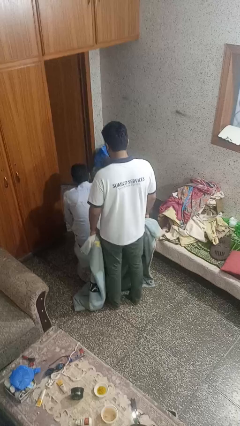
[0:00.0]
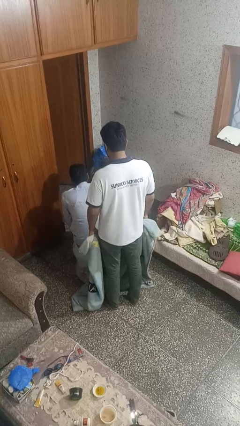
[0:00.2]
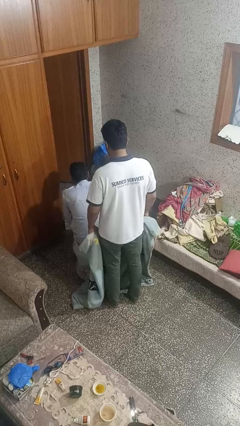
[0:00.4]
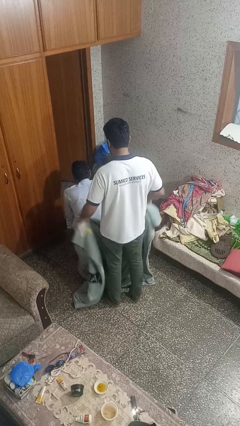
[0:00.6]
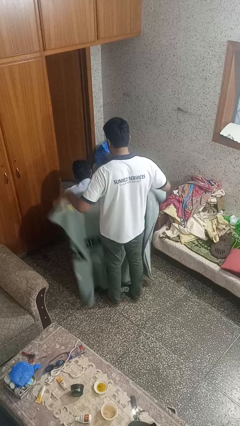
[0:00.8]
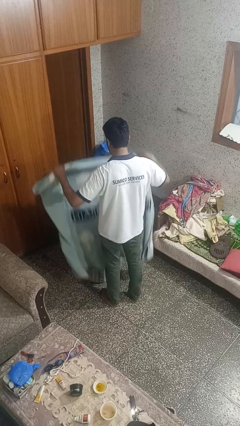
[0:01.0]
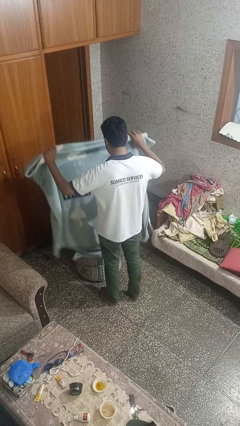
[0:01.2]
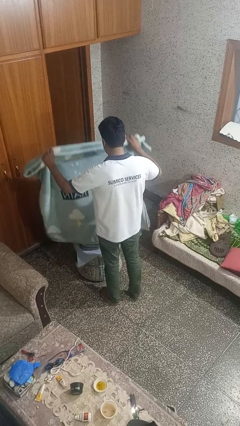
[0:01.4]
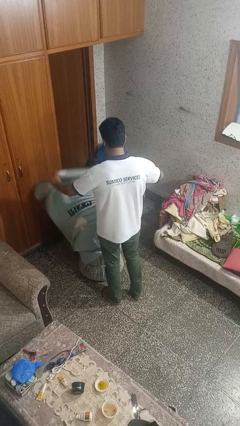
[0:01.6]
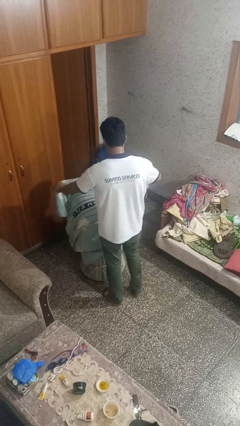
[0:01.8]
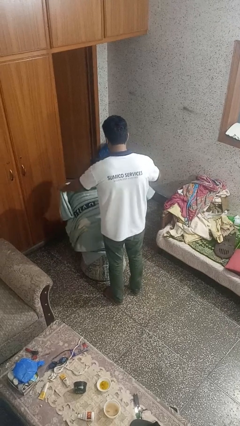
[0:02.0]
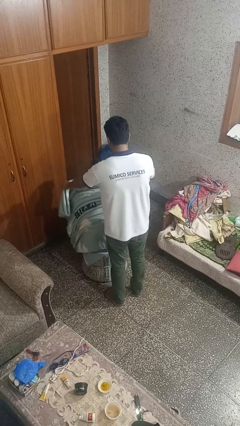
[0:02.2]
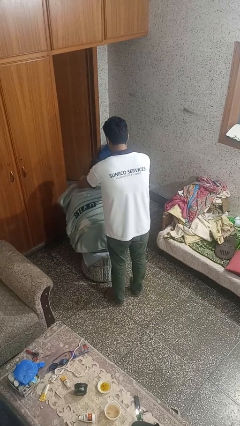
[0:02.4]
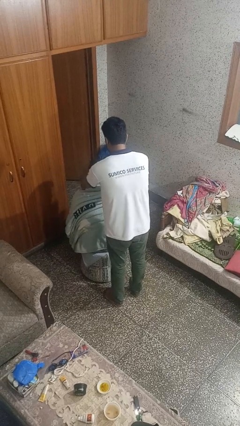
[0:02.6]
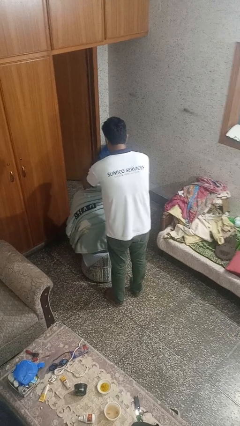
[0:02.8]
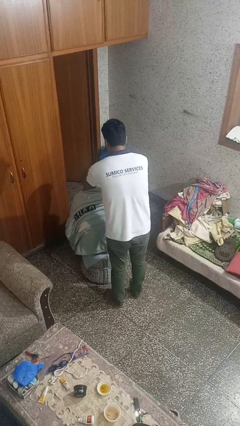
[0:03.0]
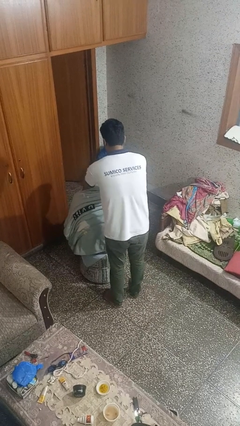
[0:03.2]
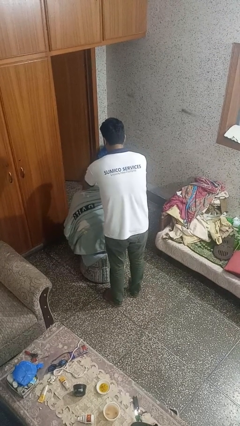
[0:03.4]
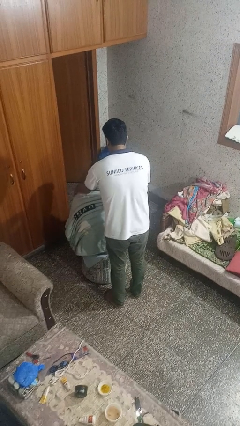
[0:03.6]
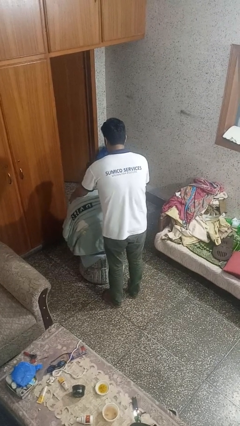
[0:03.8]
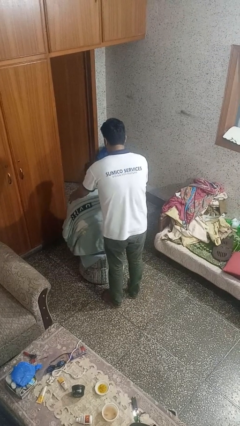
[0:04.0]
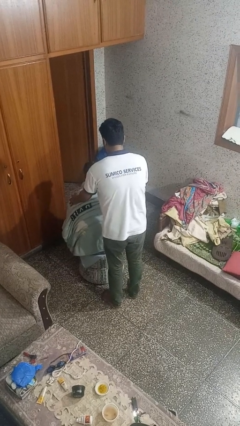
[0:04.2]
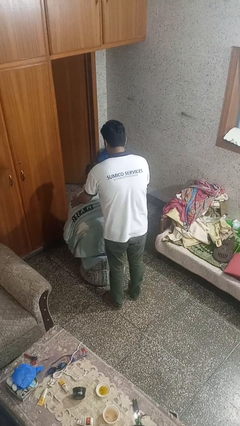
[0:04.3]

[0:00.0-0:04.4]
person covers friend with blanket

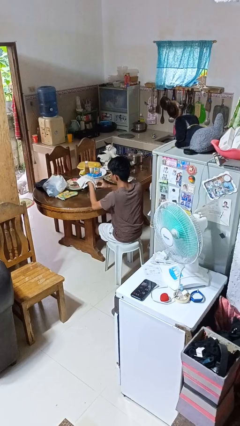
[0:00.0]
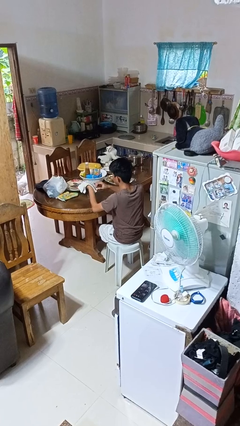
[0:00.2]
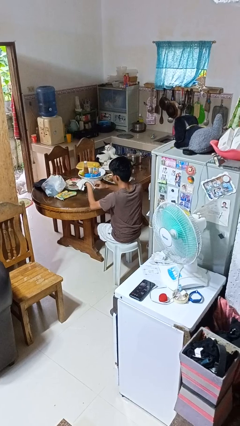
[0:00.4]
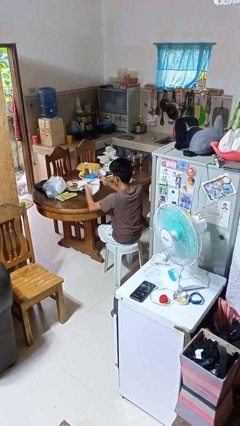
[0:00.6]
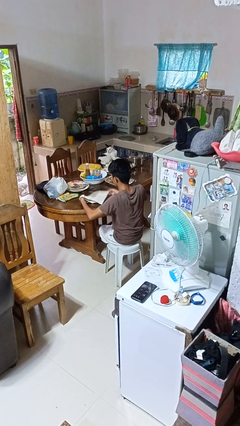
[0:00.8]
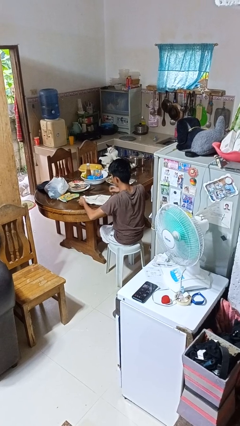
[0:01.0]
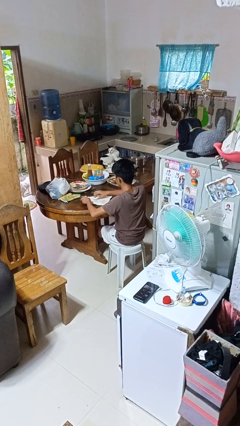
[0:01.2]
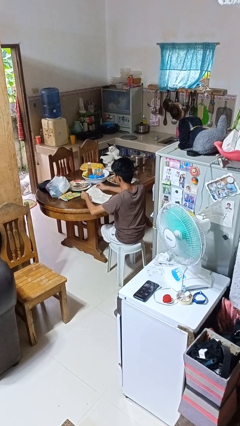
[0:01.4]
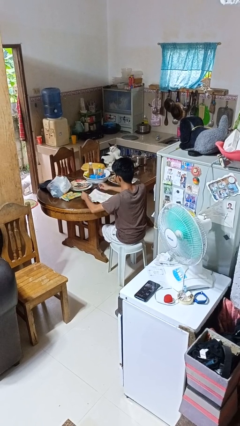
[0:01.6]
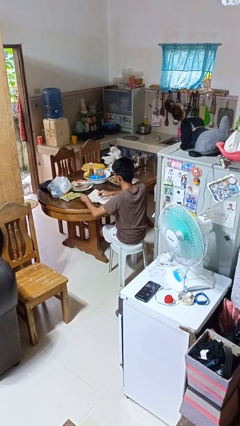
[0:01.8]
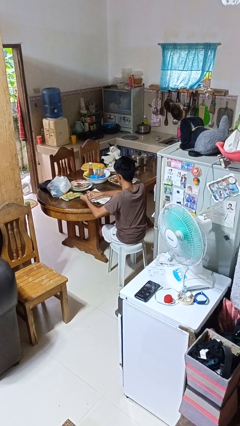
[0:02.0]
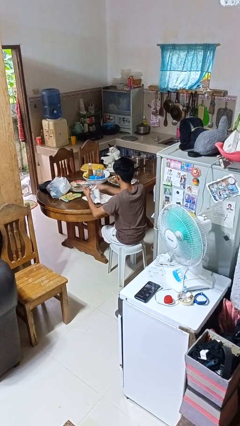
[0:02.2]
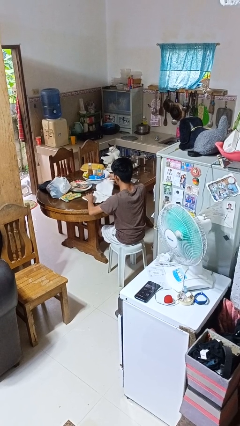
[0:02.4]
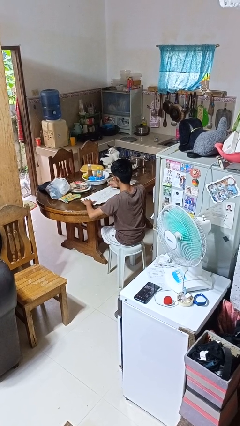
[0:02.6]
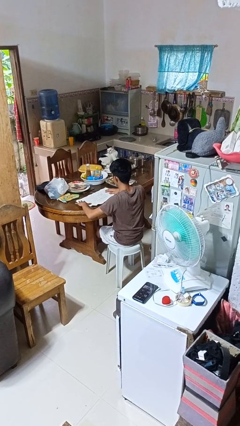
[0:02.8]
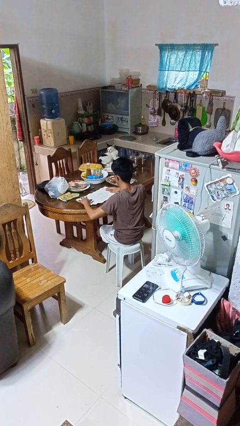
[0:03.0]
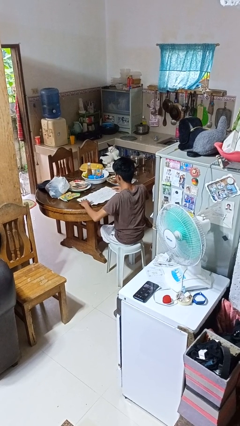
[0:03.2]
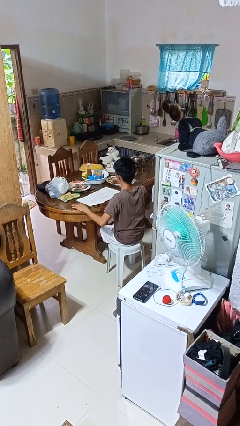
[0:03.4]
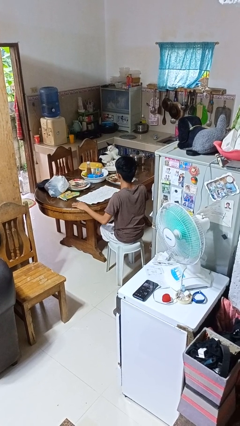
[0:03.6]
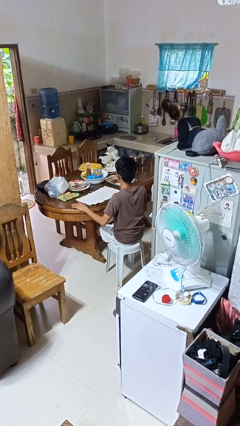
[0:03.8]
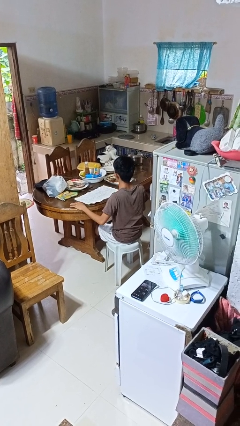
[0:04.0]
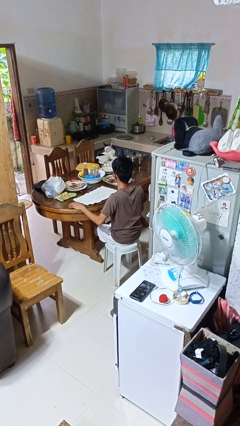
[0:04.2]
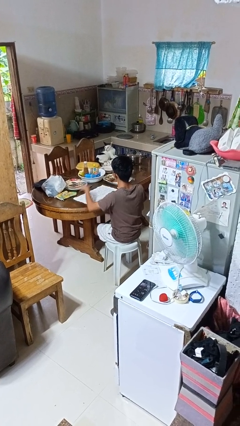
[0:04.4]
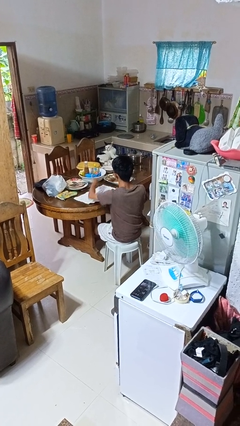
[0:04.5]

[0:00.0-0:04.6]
person spreads tablecloth

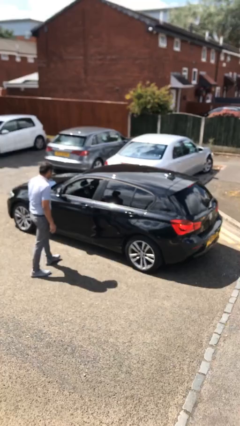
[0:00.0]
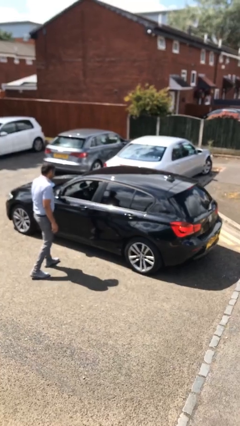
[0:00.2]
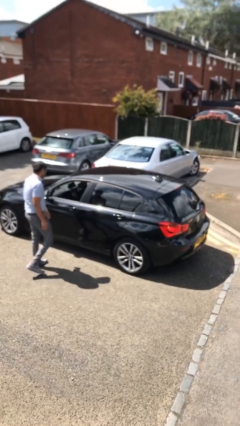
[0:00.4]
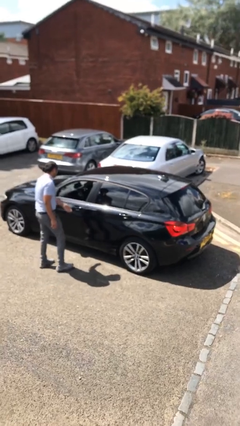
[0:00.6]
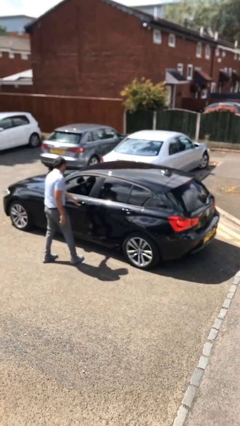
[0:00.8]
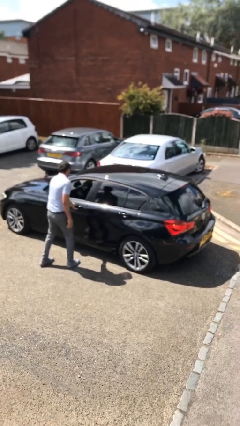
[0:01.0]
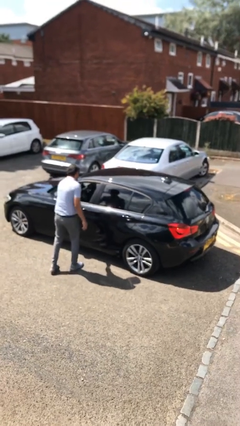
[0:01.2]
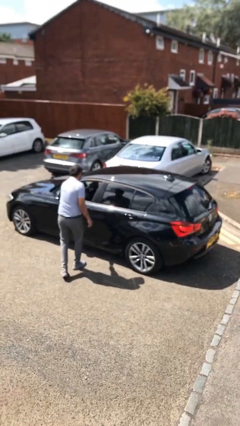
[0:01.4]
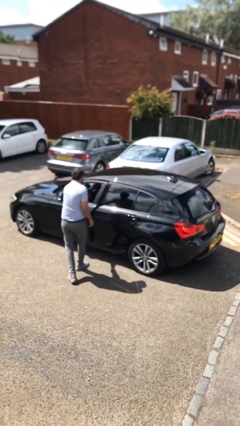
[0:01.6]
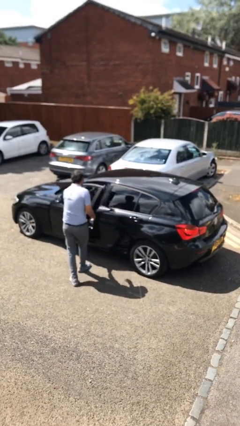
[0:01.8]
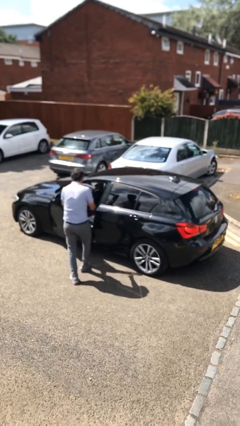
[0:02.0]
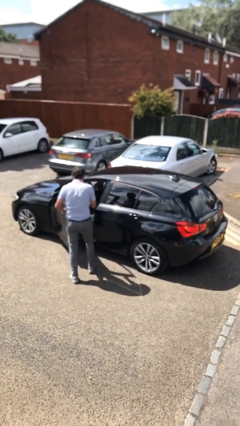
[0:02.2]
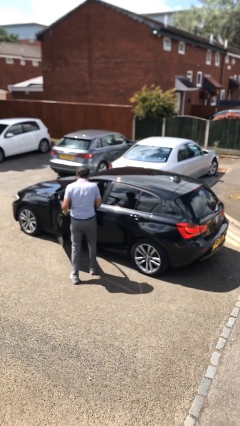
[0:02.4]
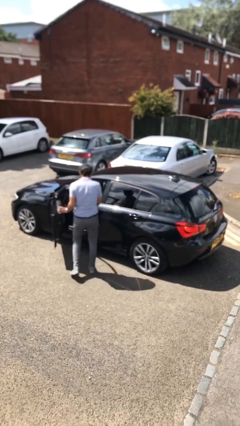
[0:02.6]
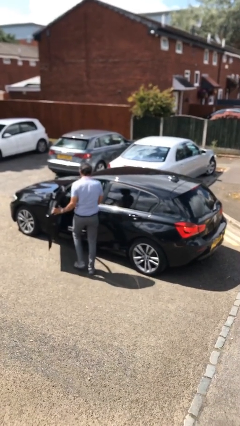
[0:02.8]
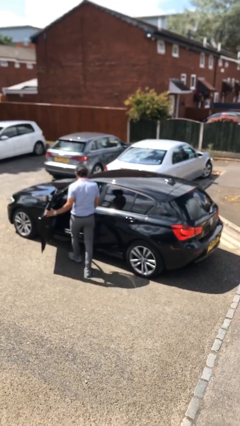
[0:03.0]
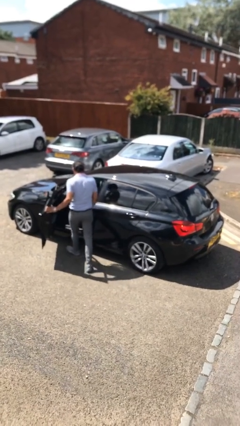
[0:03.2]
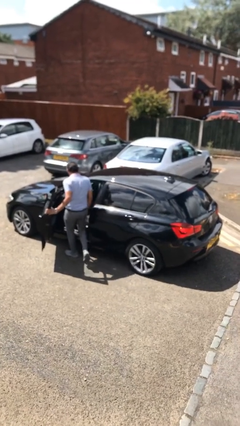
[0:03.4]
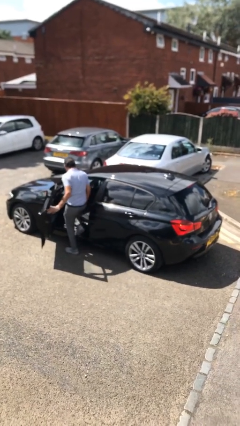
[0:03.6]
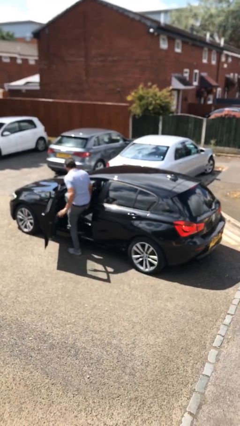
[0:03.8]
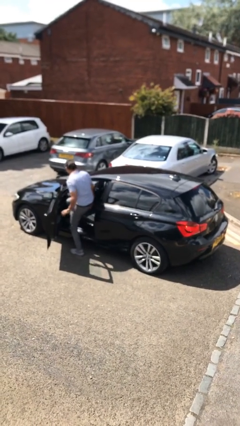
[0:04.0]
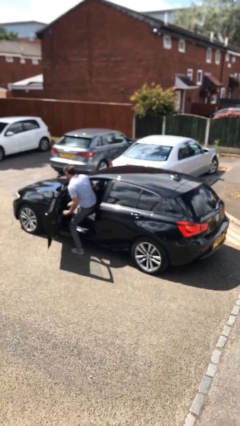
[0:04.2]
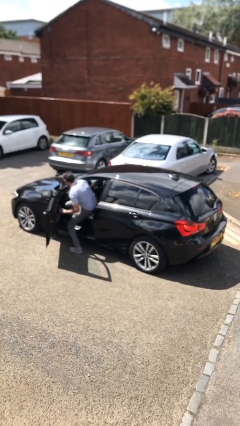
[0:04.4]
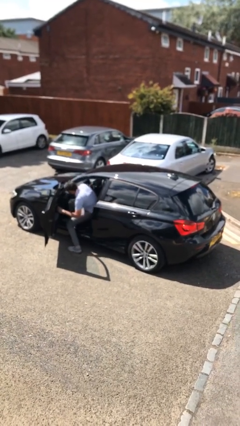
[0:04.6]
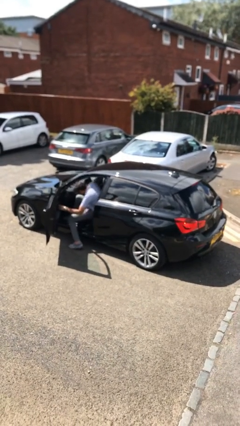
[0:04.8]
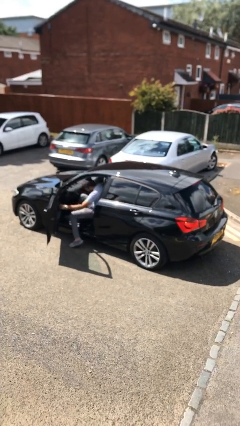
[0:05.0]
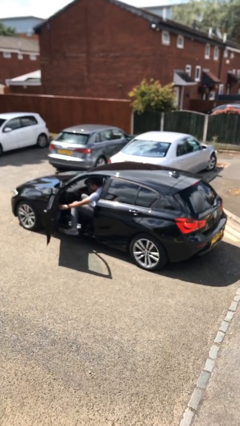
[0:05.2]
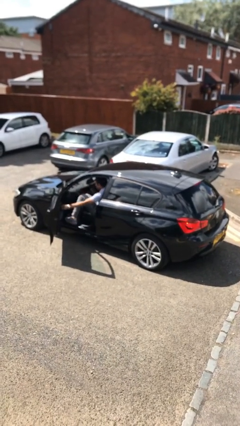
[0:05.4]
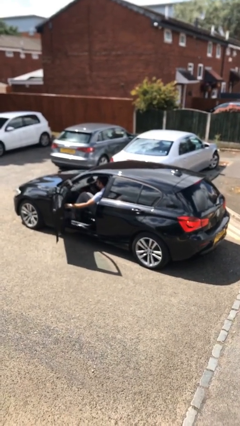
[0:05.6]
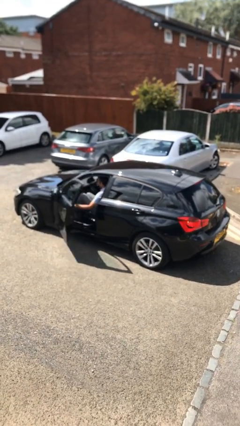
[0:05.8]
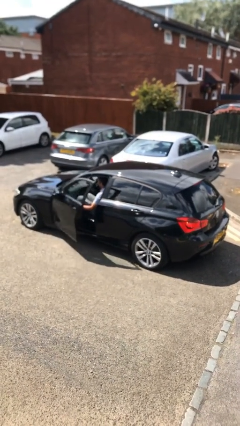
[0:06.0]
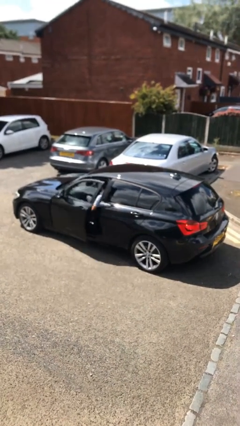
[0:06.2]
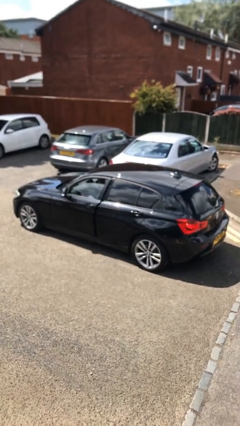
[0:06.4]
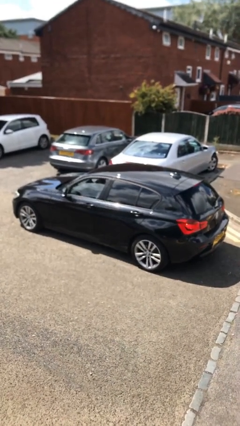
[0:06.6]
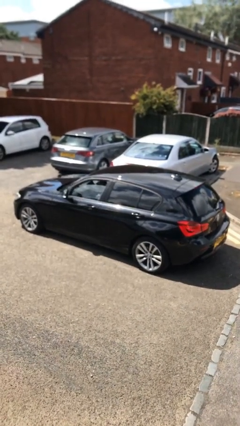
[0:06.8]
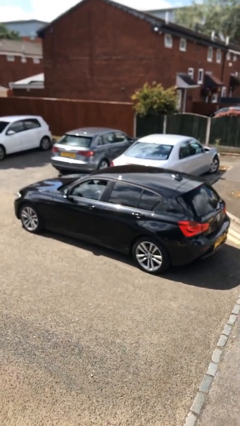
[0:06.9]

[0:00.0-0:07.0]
car picks up person

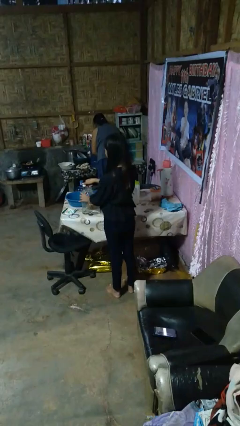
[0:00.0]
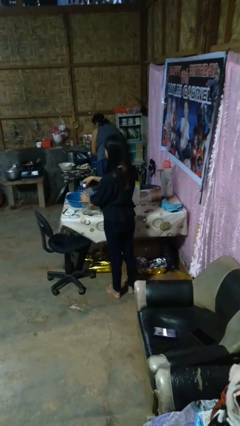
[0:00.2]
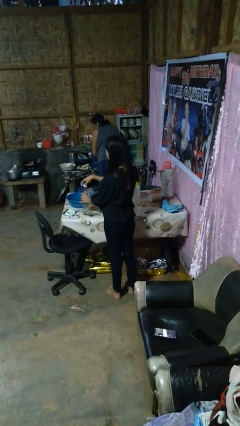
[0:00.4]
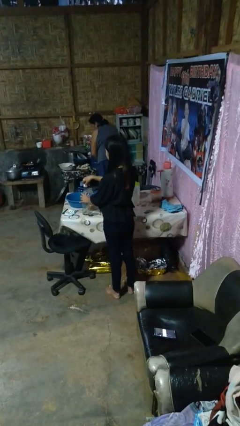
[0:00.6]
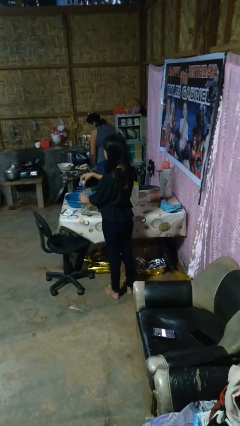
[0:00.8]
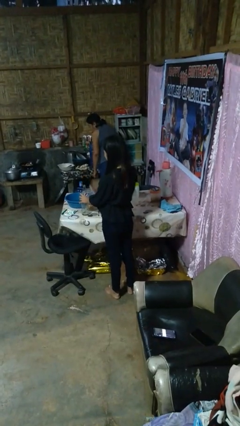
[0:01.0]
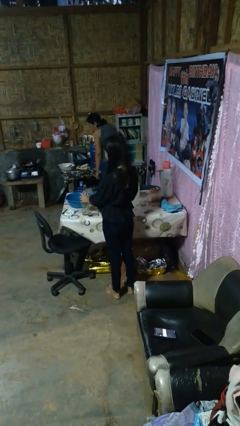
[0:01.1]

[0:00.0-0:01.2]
person unscrews lid from bottle

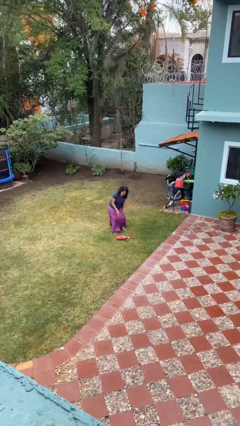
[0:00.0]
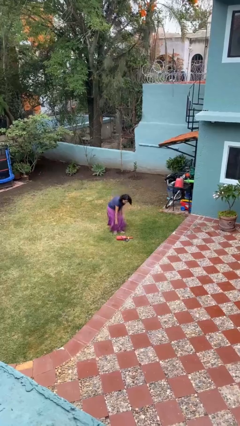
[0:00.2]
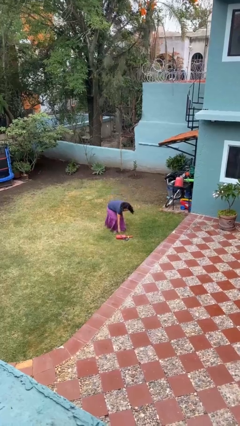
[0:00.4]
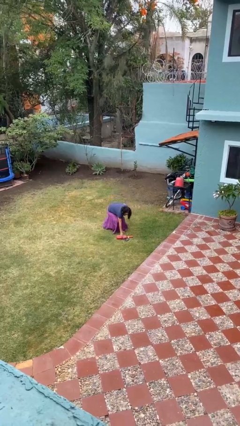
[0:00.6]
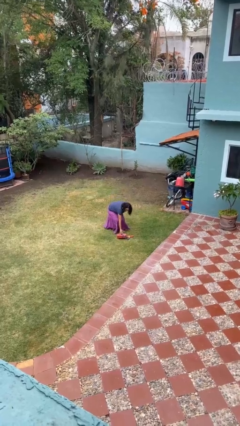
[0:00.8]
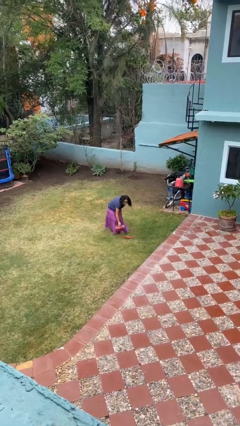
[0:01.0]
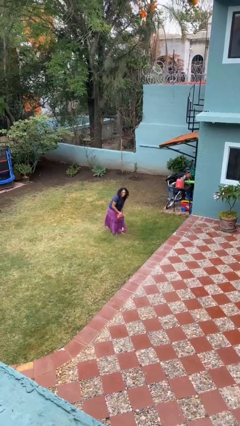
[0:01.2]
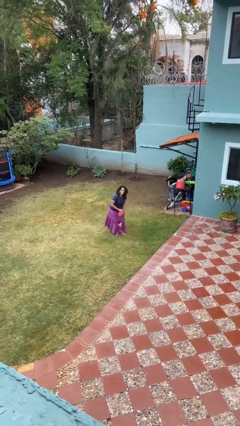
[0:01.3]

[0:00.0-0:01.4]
person picks up object from floor
